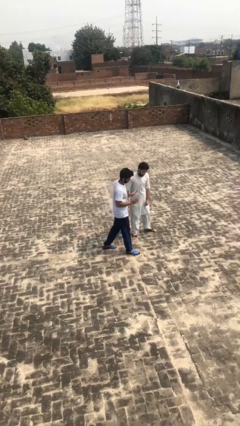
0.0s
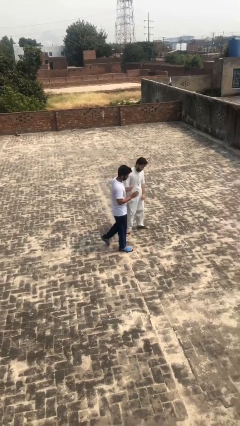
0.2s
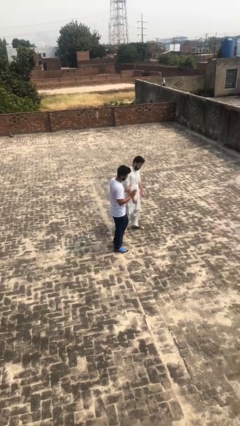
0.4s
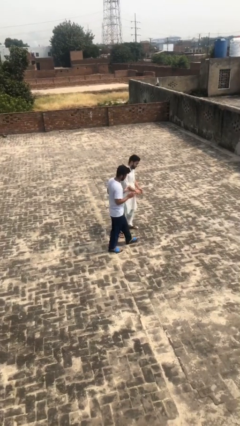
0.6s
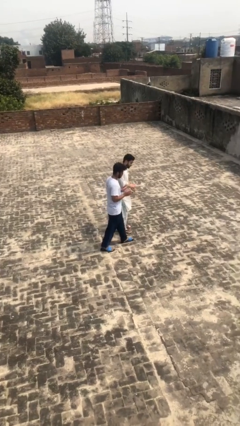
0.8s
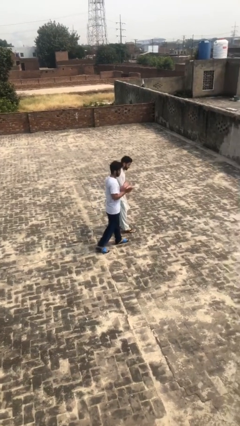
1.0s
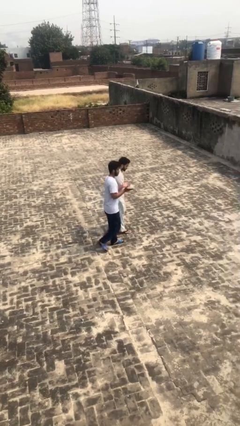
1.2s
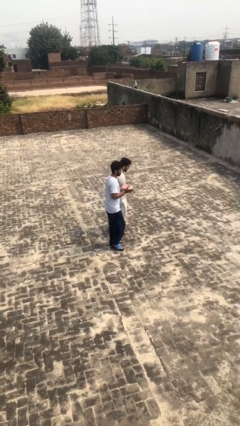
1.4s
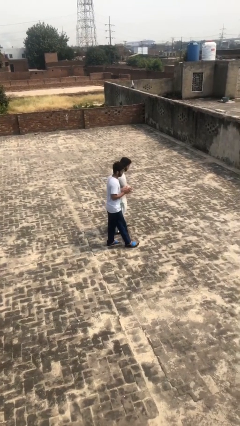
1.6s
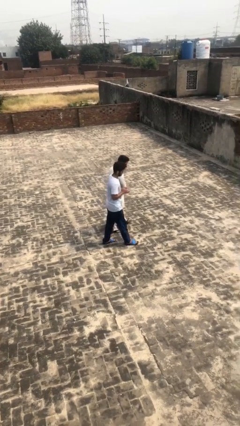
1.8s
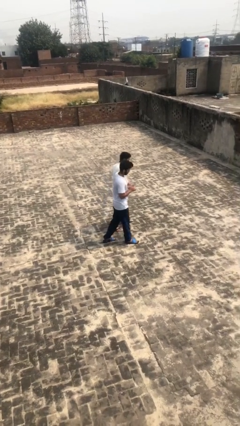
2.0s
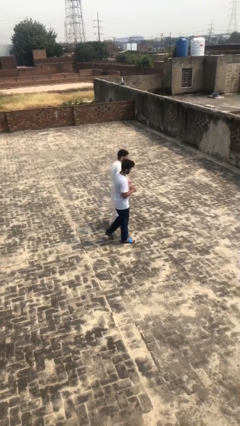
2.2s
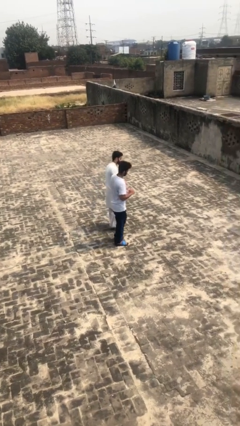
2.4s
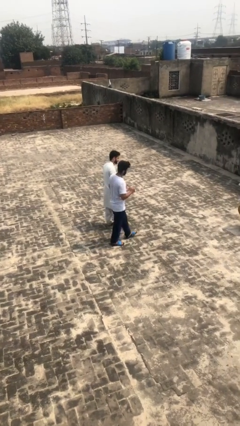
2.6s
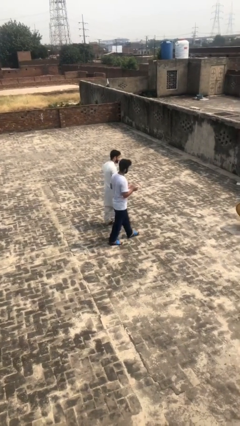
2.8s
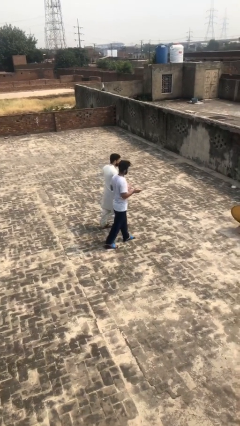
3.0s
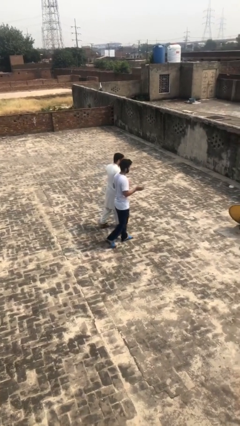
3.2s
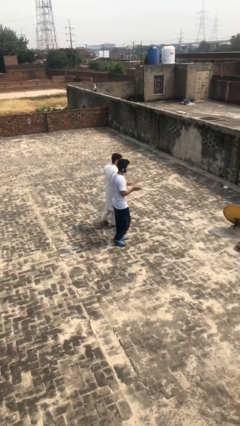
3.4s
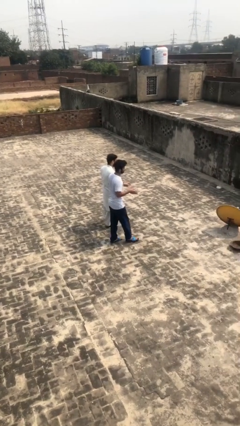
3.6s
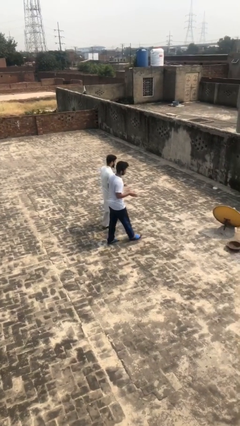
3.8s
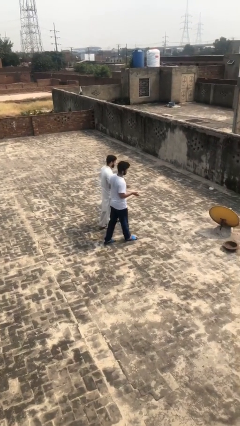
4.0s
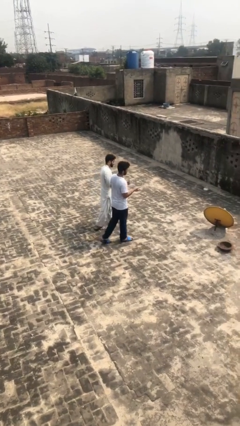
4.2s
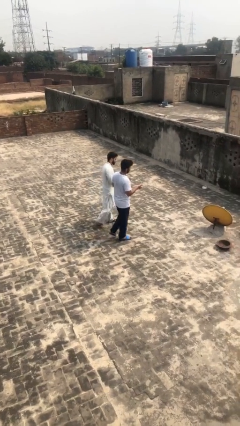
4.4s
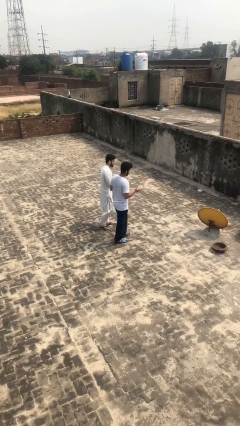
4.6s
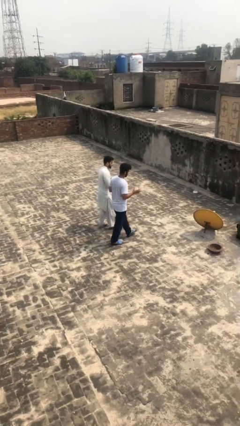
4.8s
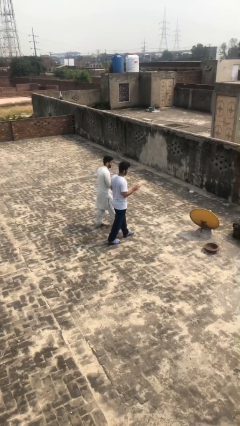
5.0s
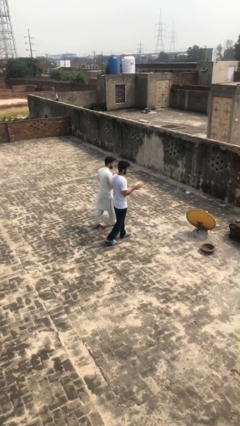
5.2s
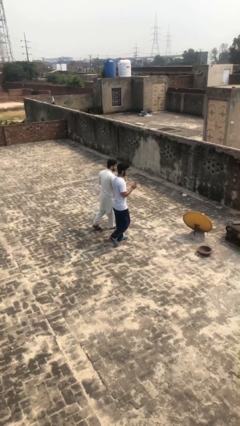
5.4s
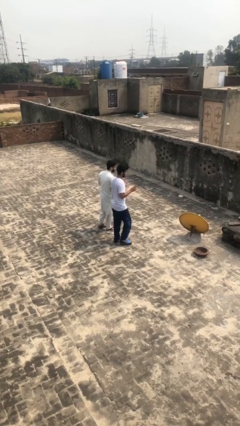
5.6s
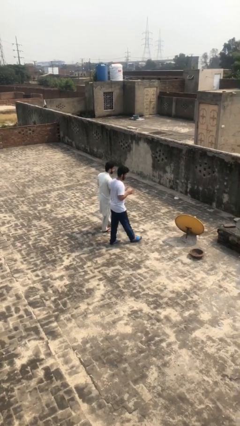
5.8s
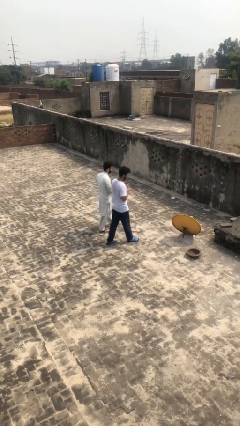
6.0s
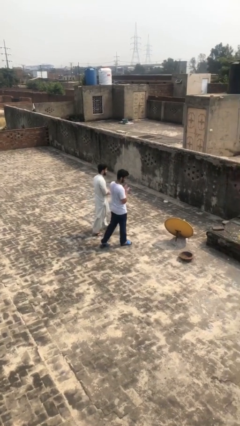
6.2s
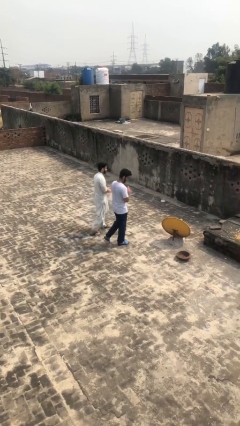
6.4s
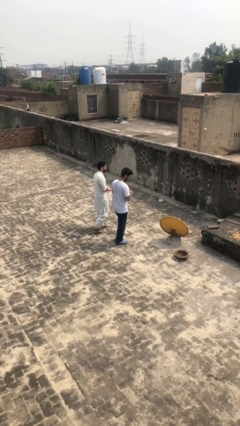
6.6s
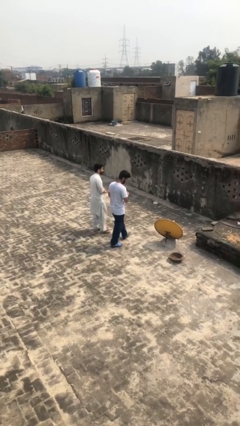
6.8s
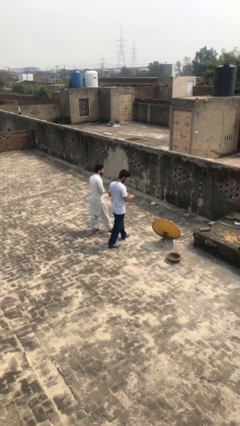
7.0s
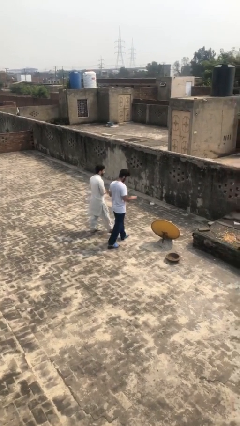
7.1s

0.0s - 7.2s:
person talks to person

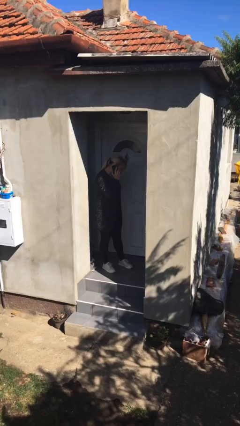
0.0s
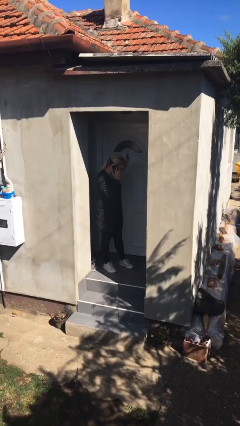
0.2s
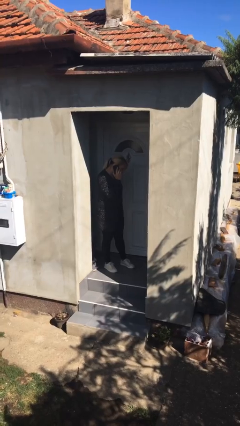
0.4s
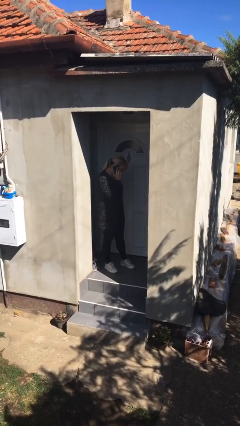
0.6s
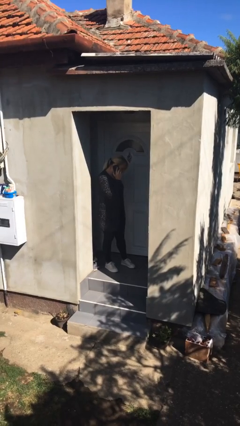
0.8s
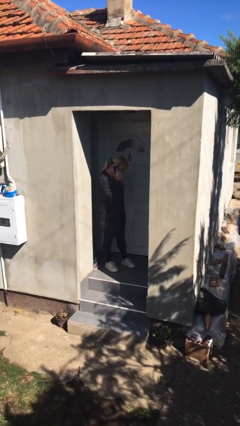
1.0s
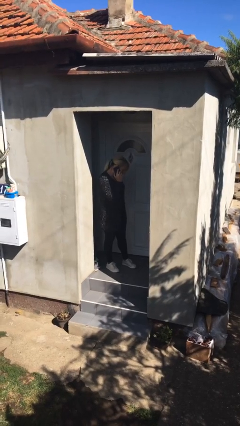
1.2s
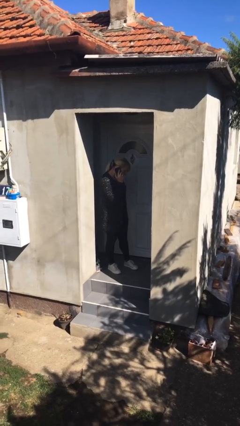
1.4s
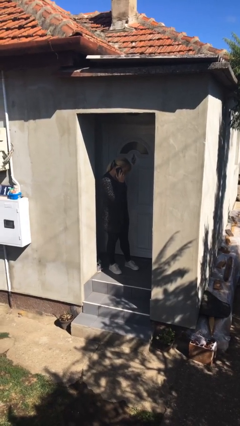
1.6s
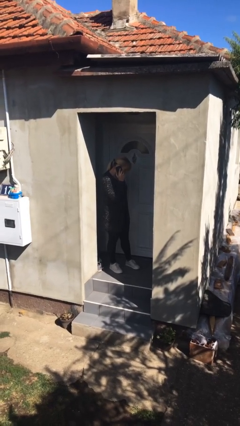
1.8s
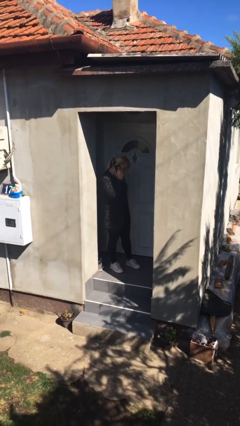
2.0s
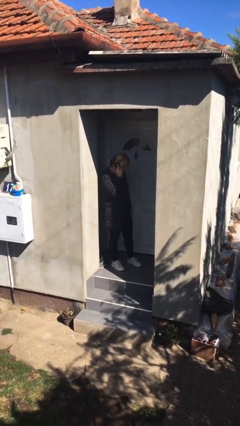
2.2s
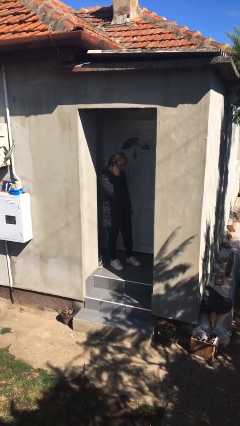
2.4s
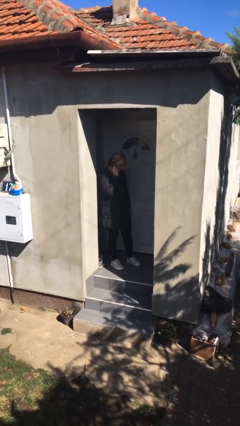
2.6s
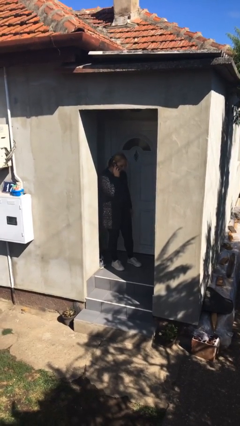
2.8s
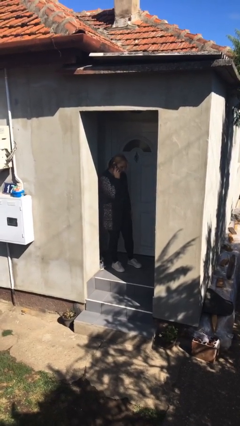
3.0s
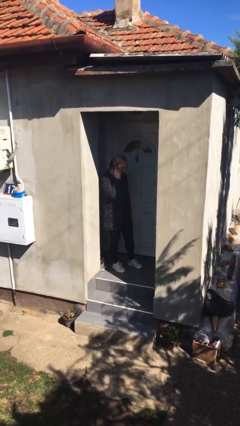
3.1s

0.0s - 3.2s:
person closes facility door

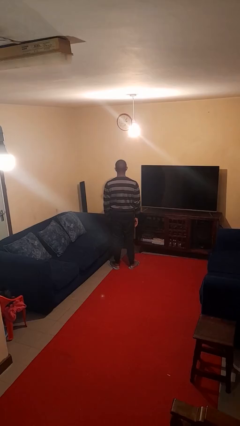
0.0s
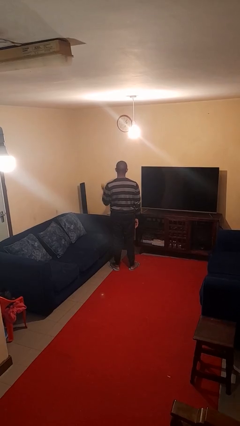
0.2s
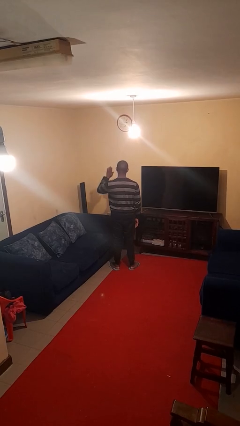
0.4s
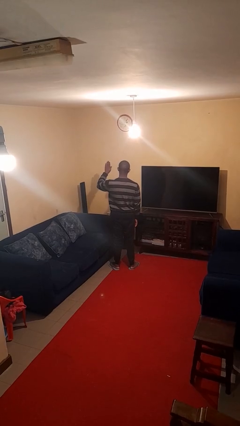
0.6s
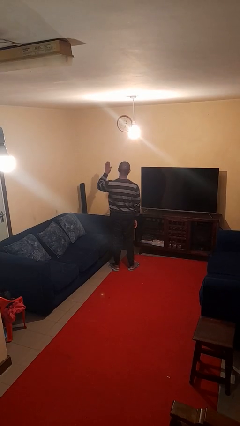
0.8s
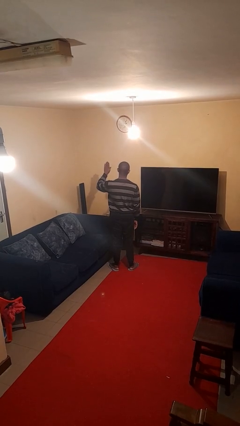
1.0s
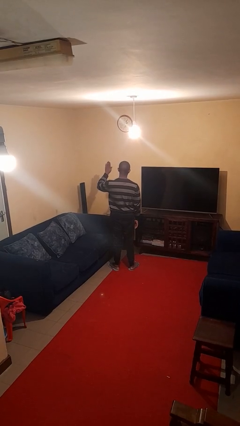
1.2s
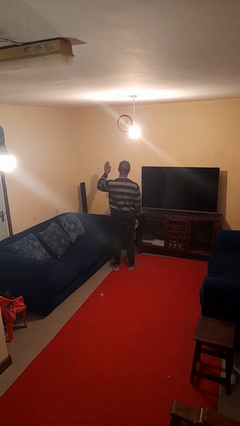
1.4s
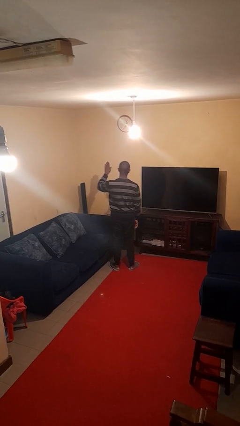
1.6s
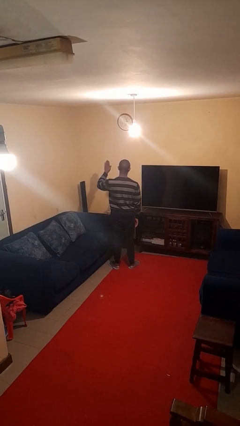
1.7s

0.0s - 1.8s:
person gestures stop

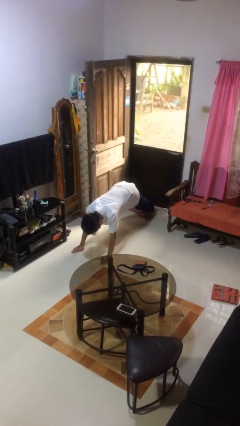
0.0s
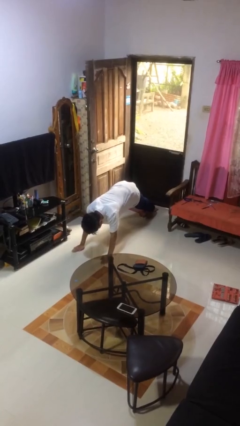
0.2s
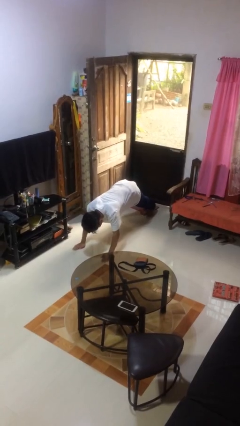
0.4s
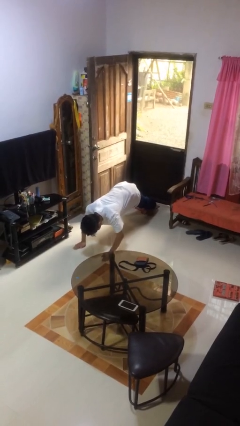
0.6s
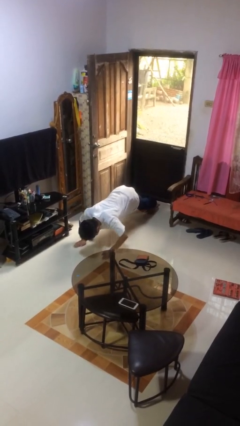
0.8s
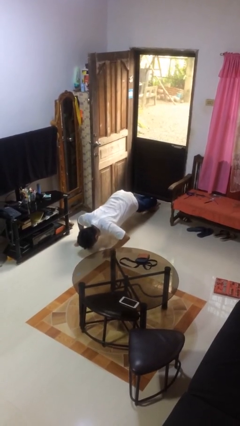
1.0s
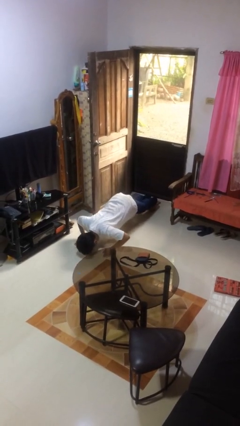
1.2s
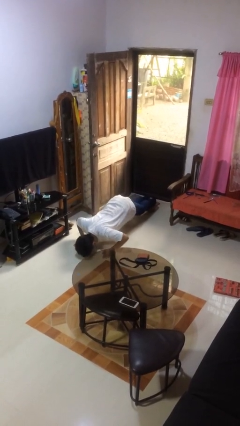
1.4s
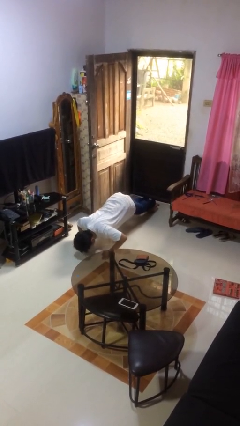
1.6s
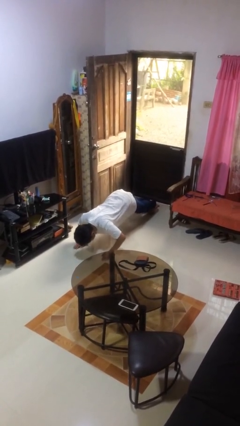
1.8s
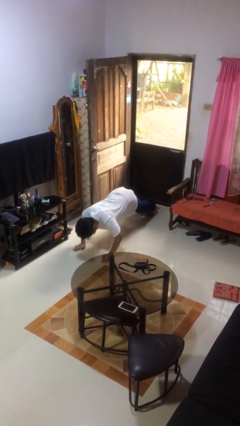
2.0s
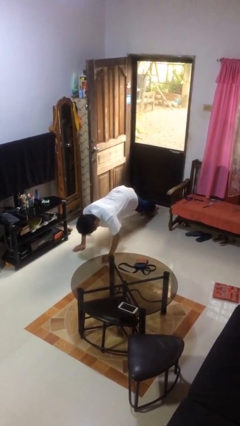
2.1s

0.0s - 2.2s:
person exercises with pushup

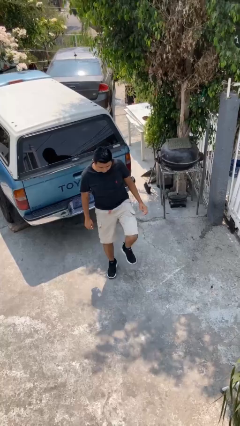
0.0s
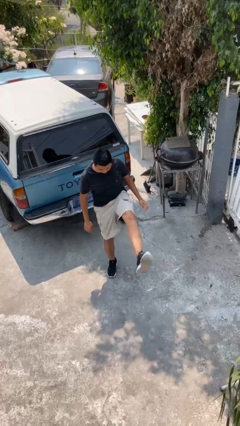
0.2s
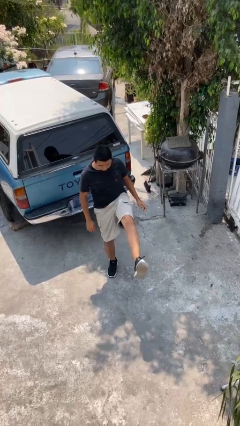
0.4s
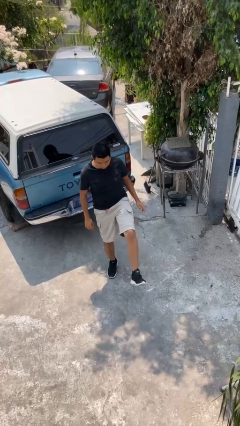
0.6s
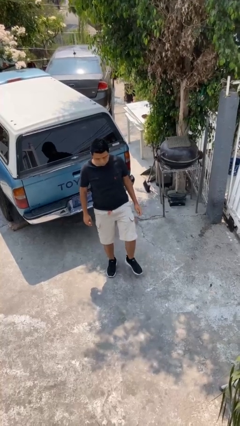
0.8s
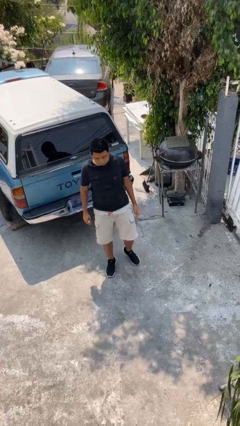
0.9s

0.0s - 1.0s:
person karate kicks

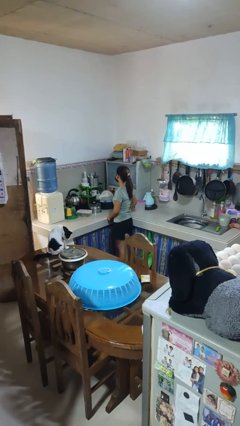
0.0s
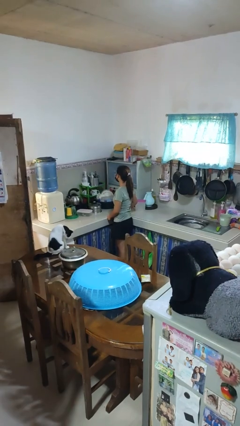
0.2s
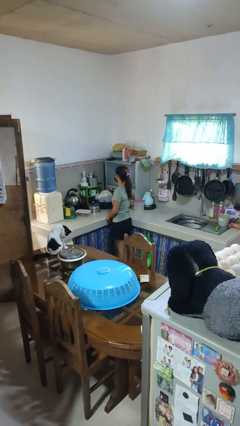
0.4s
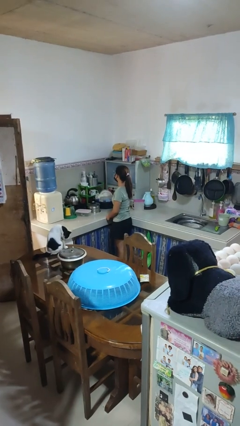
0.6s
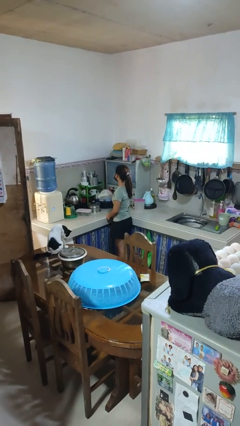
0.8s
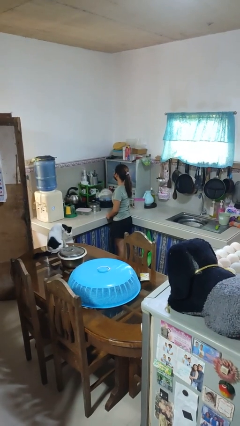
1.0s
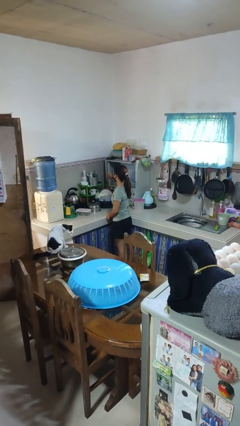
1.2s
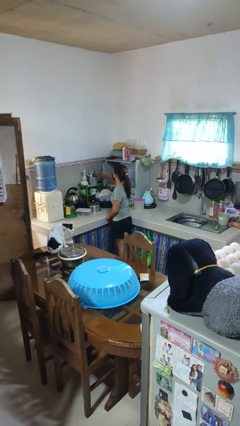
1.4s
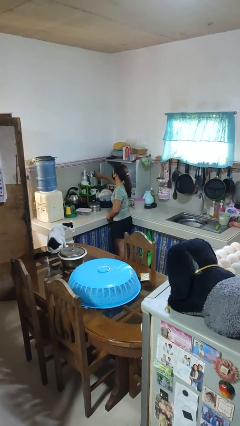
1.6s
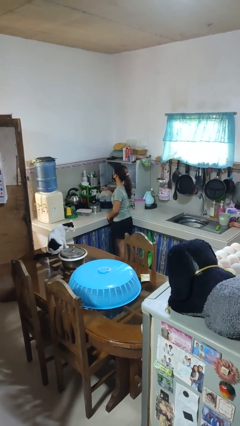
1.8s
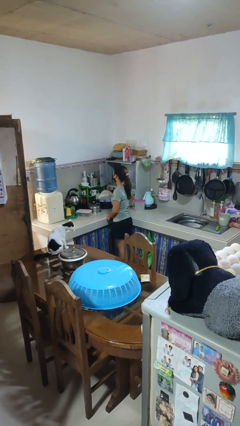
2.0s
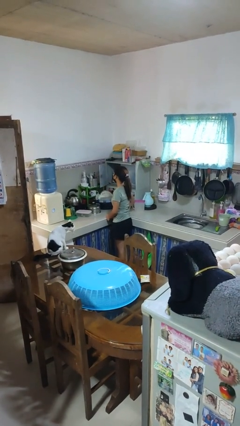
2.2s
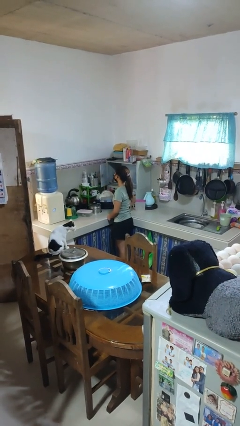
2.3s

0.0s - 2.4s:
person opens kitchen drawer
